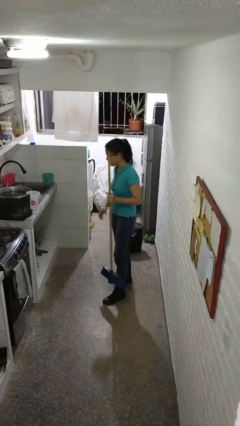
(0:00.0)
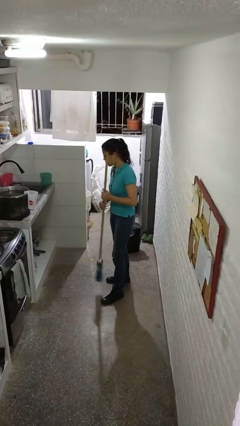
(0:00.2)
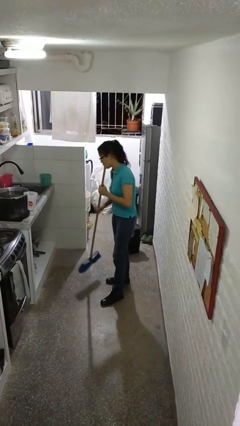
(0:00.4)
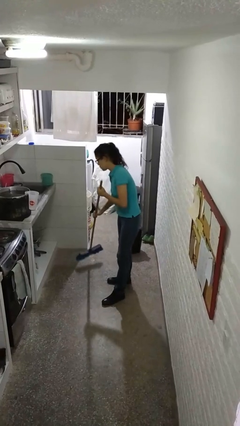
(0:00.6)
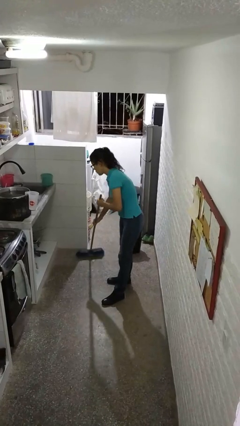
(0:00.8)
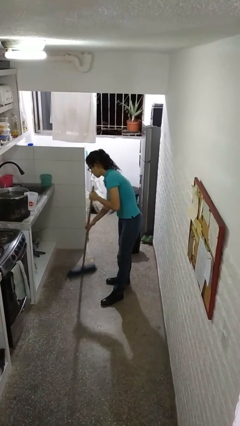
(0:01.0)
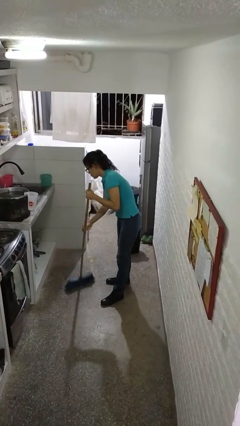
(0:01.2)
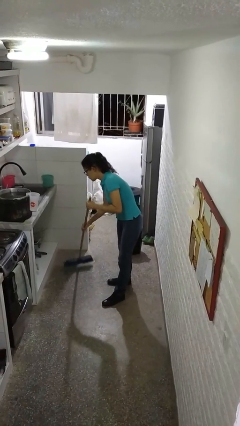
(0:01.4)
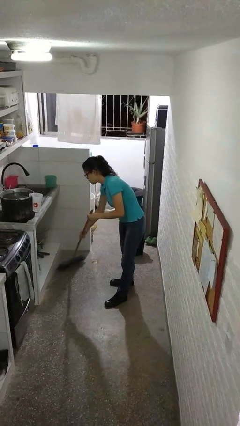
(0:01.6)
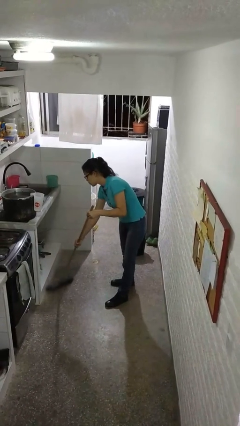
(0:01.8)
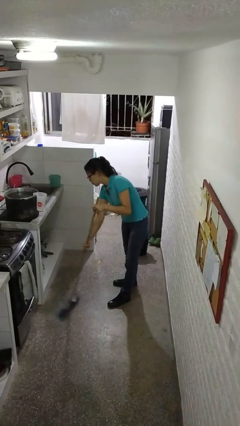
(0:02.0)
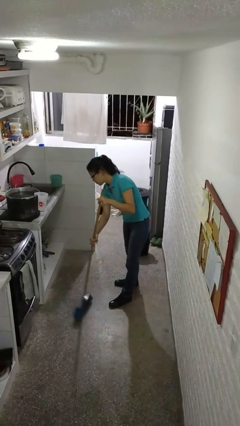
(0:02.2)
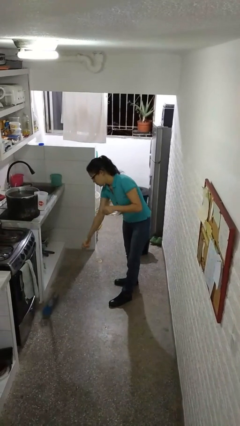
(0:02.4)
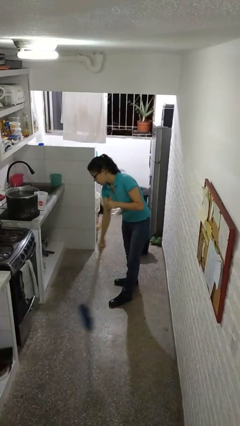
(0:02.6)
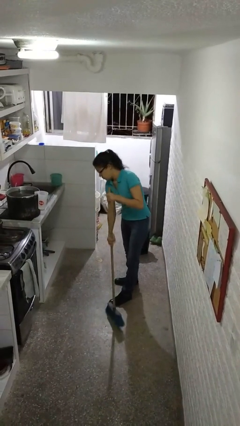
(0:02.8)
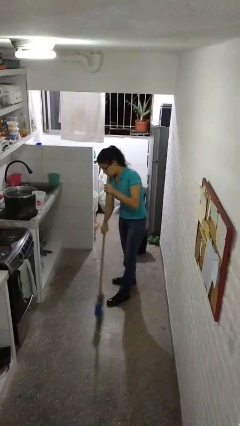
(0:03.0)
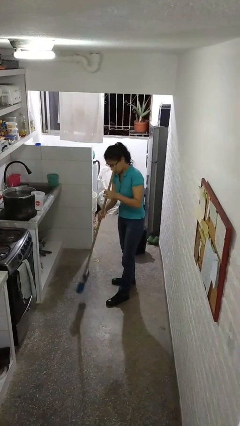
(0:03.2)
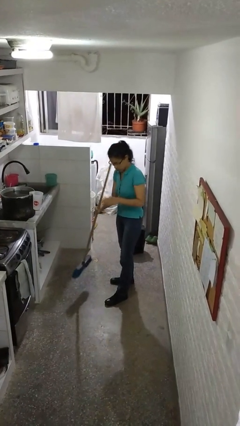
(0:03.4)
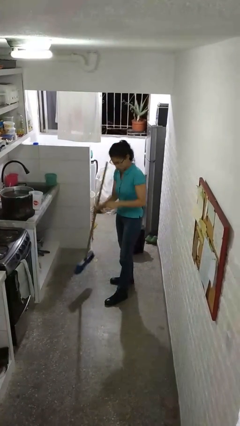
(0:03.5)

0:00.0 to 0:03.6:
person sweeps floor

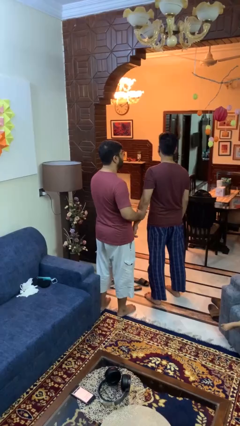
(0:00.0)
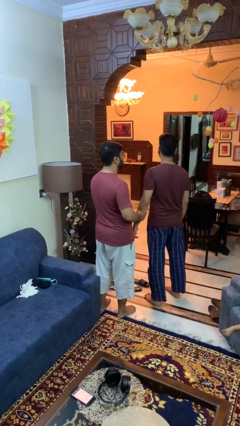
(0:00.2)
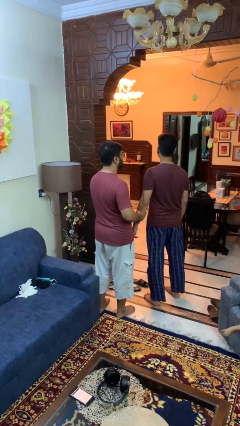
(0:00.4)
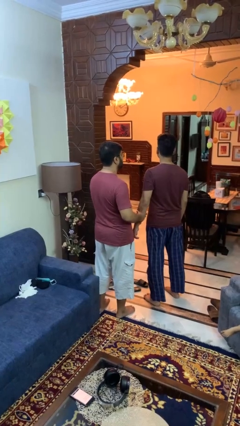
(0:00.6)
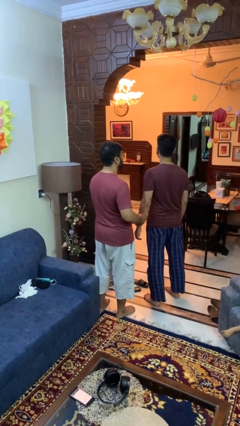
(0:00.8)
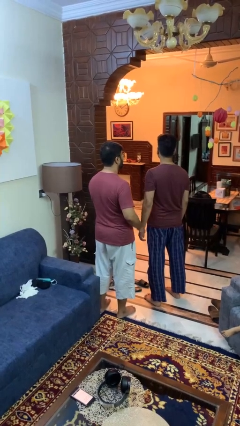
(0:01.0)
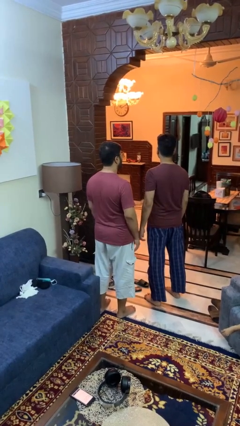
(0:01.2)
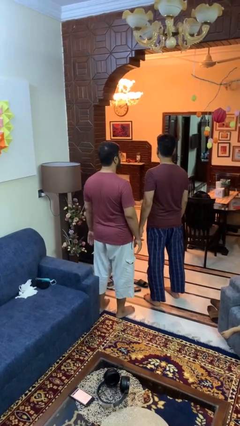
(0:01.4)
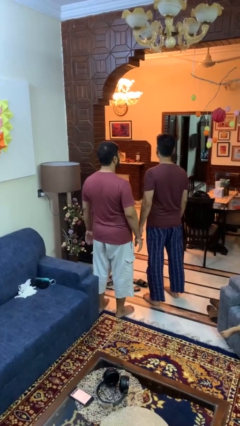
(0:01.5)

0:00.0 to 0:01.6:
person grabs person by forearm

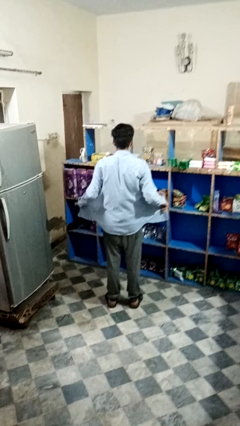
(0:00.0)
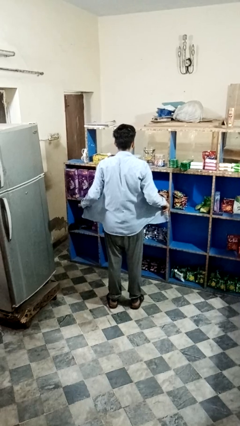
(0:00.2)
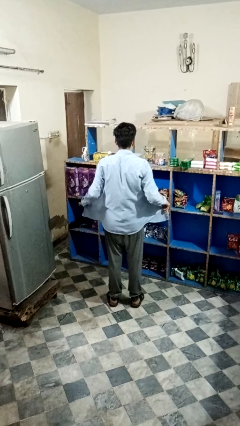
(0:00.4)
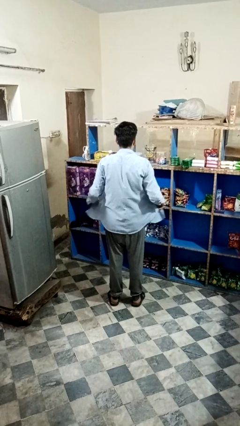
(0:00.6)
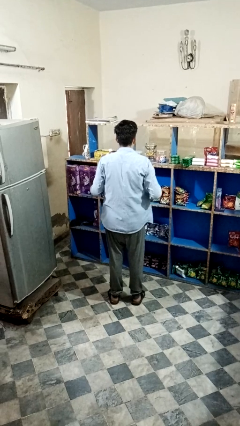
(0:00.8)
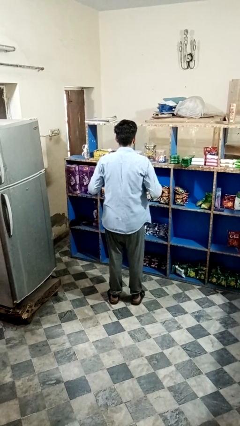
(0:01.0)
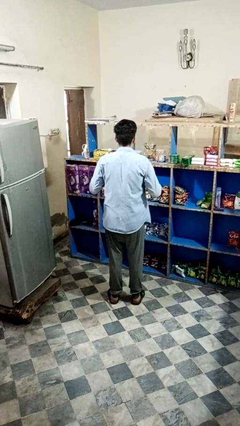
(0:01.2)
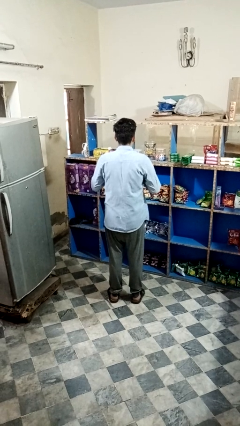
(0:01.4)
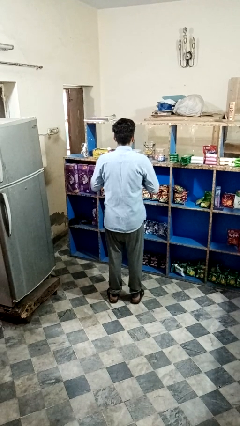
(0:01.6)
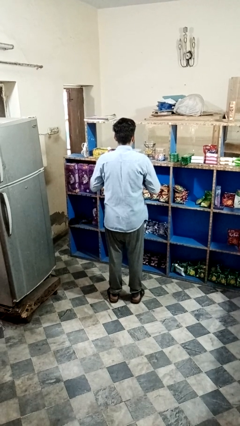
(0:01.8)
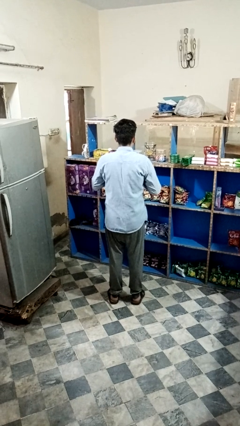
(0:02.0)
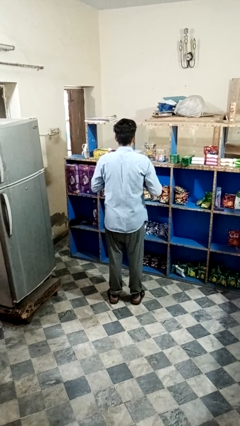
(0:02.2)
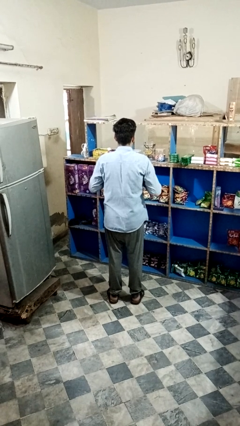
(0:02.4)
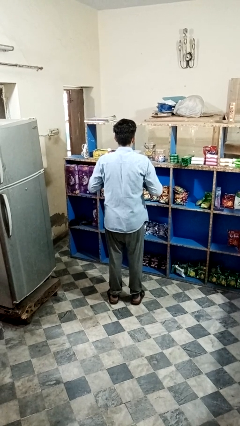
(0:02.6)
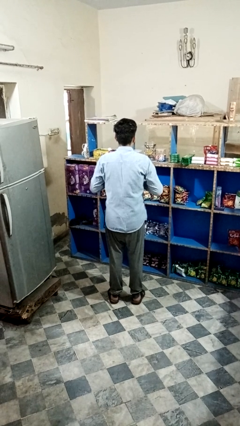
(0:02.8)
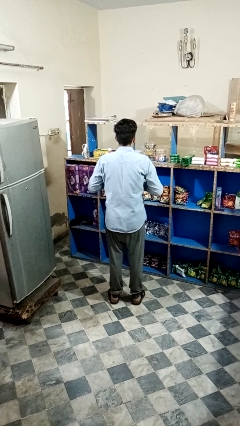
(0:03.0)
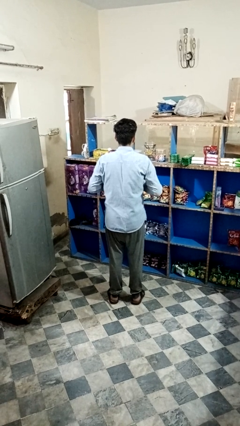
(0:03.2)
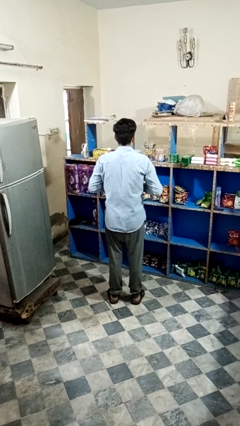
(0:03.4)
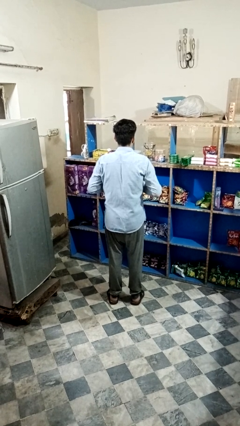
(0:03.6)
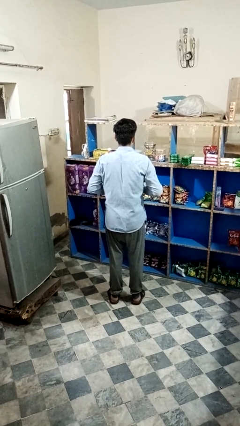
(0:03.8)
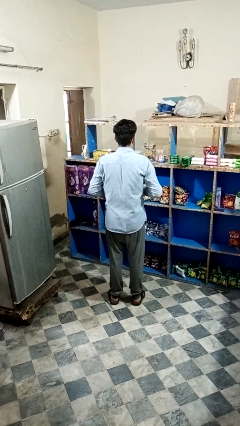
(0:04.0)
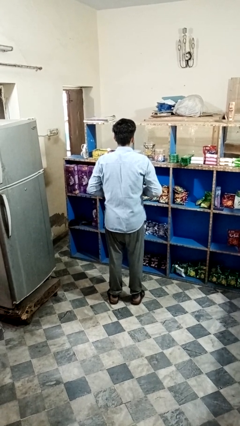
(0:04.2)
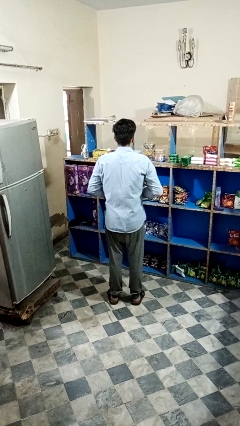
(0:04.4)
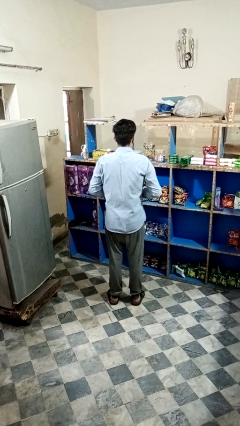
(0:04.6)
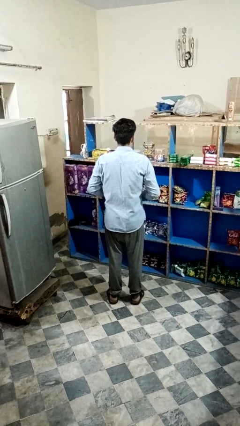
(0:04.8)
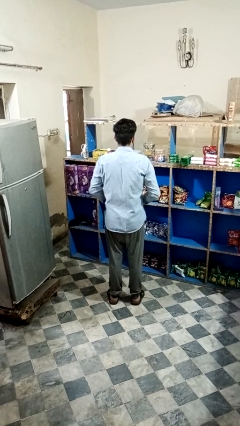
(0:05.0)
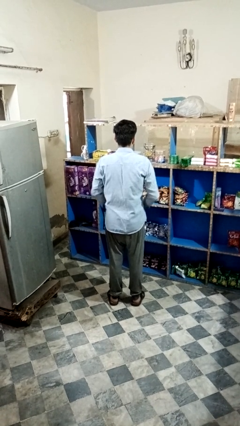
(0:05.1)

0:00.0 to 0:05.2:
person buttons shirt

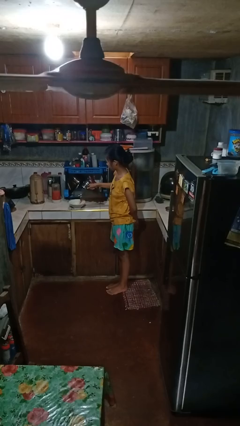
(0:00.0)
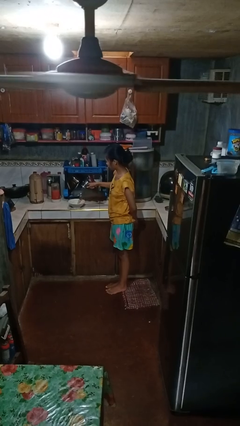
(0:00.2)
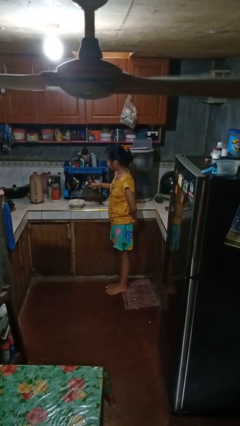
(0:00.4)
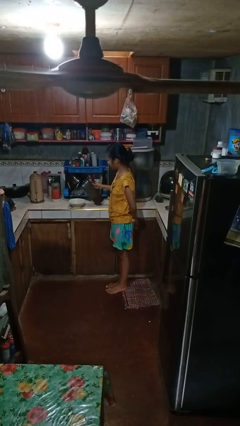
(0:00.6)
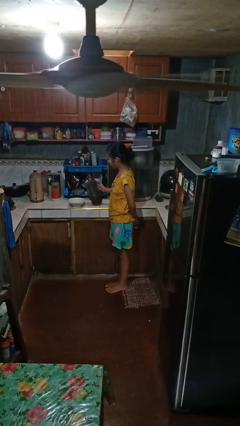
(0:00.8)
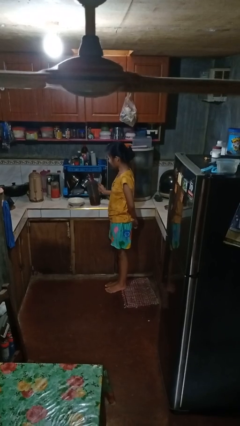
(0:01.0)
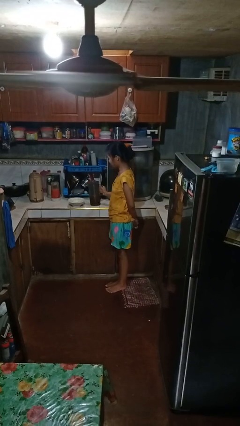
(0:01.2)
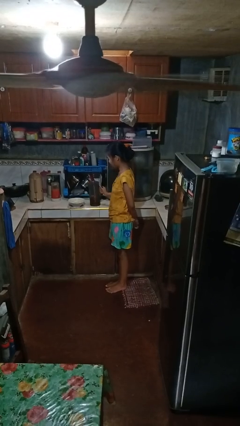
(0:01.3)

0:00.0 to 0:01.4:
person pours into bowl

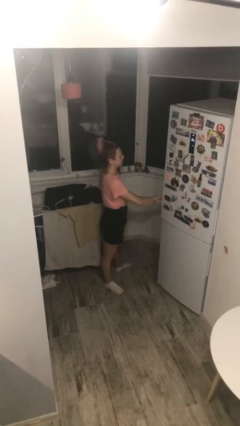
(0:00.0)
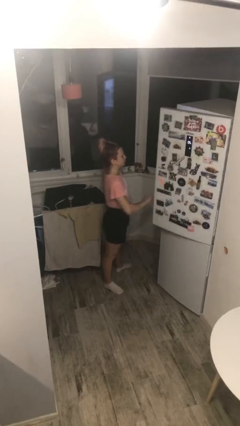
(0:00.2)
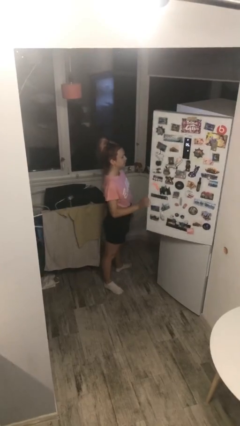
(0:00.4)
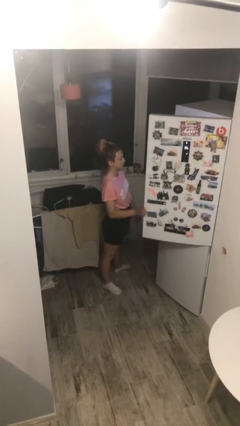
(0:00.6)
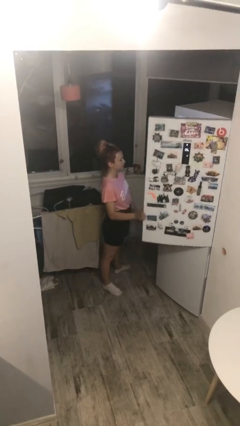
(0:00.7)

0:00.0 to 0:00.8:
person opens refrigerator

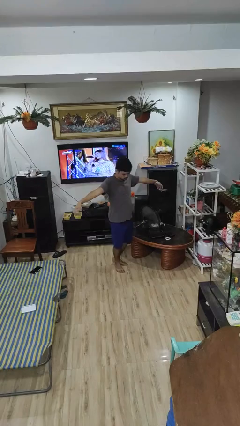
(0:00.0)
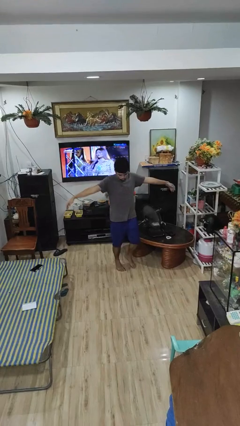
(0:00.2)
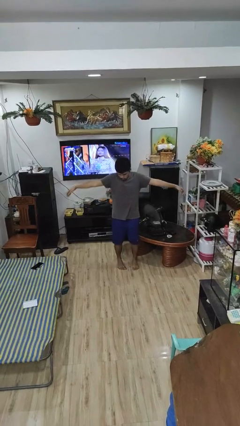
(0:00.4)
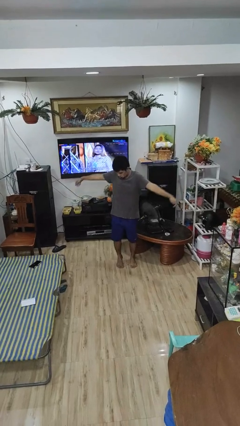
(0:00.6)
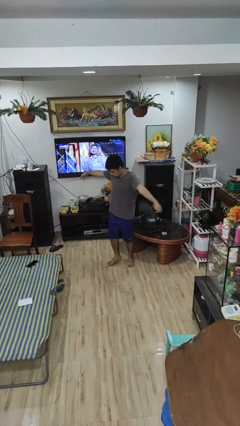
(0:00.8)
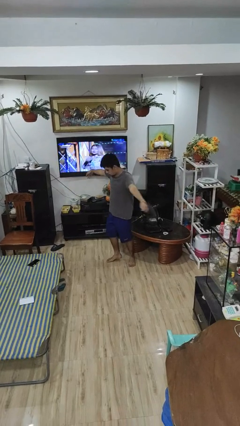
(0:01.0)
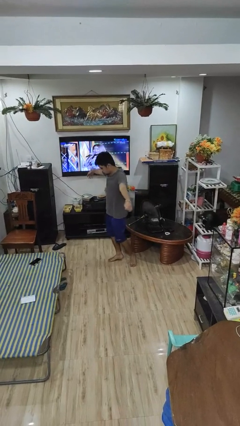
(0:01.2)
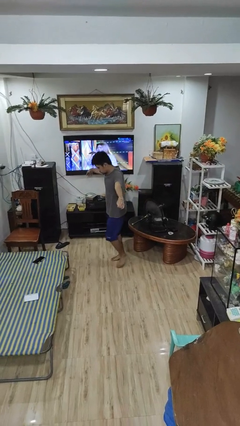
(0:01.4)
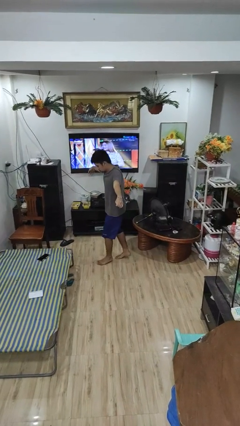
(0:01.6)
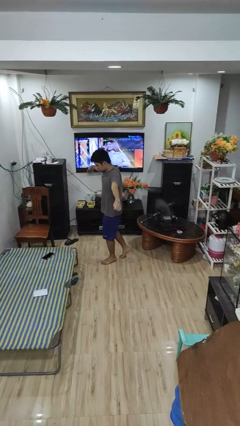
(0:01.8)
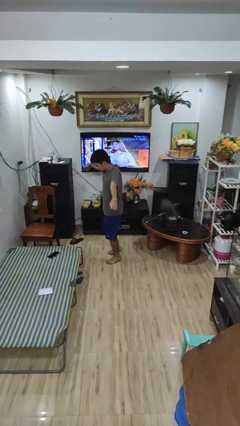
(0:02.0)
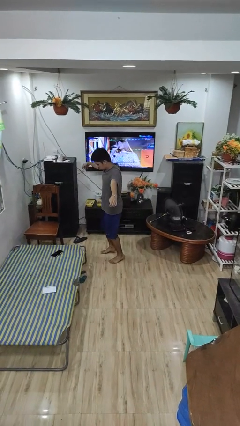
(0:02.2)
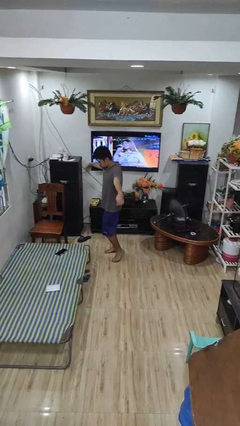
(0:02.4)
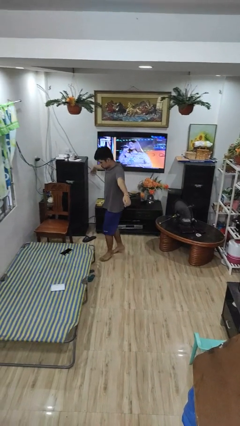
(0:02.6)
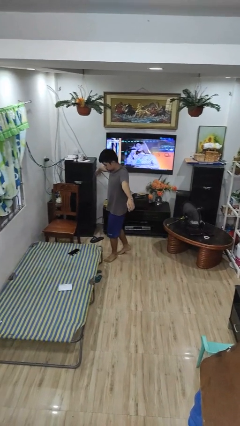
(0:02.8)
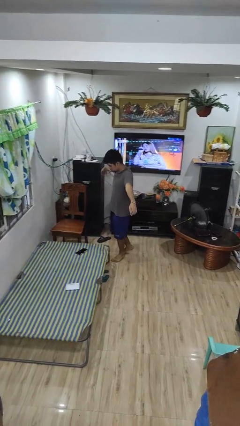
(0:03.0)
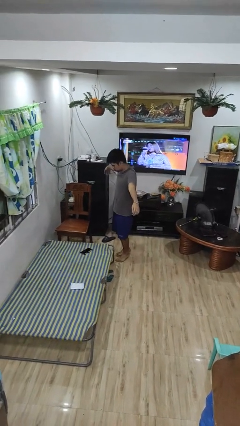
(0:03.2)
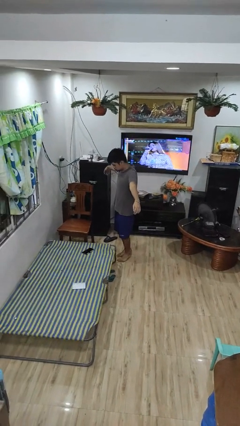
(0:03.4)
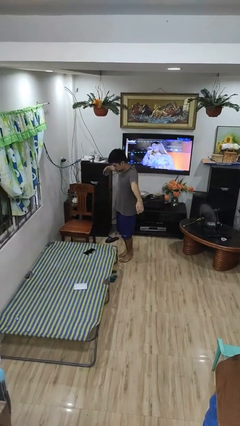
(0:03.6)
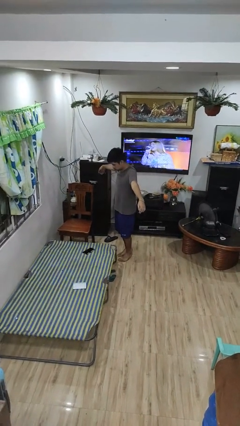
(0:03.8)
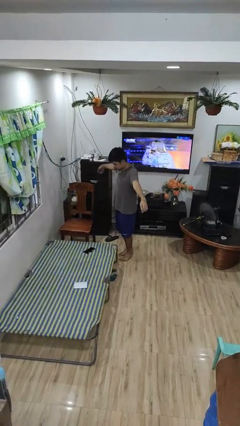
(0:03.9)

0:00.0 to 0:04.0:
person walks tiptoe

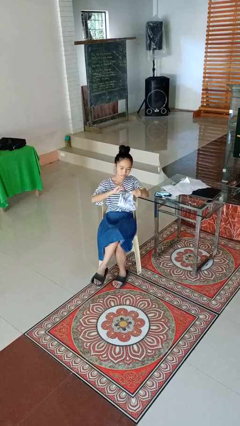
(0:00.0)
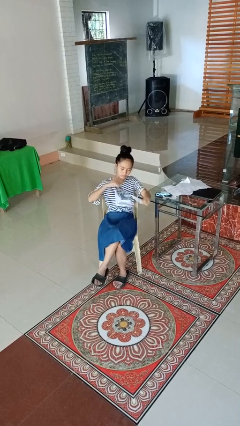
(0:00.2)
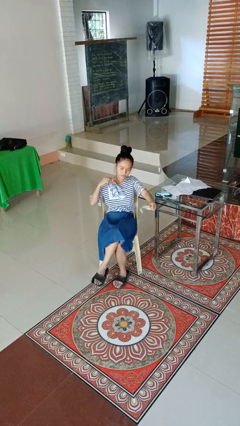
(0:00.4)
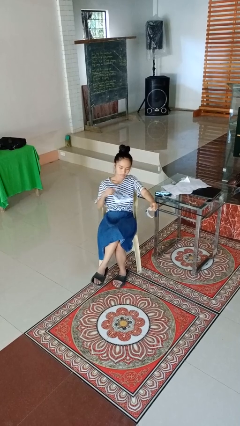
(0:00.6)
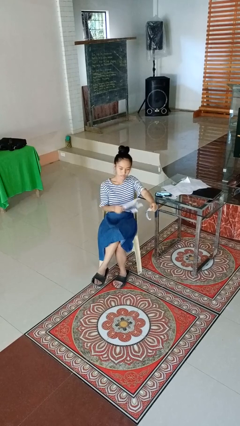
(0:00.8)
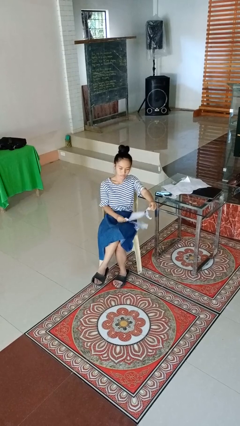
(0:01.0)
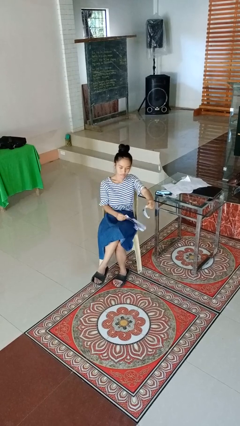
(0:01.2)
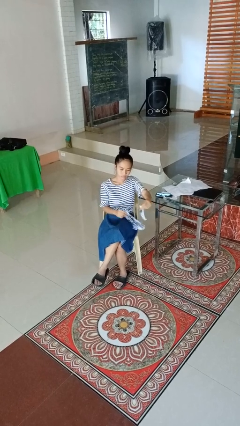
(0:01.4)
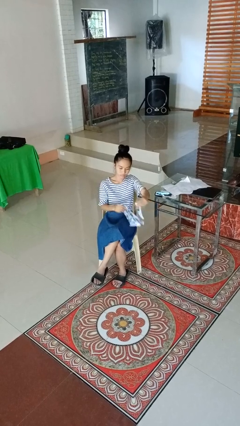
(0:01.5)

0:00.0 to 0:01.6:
person tears paper
